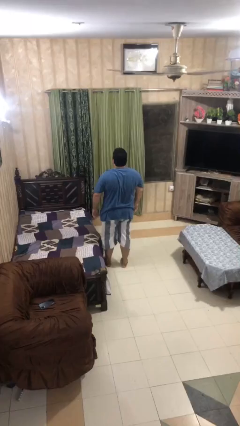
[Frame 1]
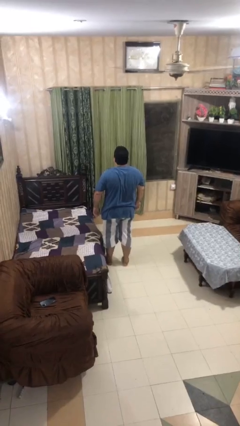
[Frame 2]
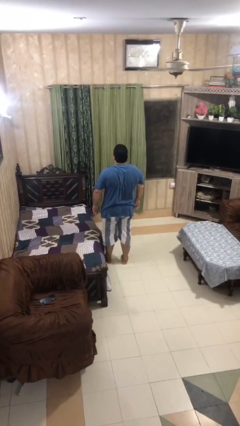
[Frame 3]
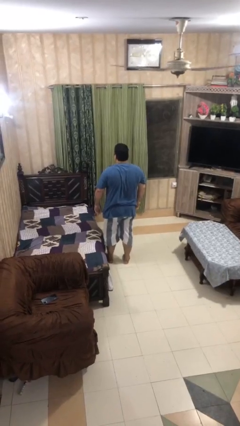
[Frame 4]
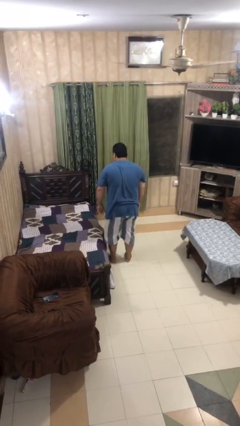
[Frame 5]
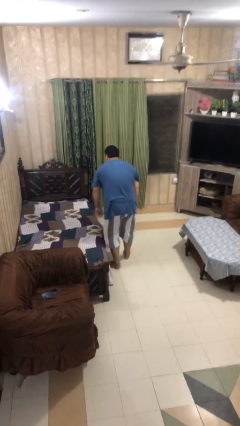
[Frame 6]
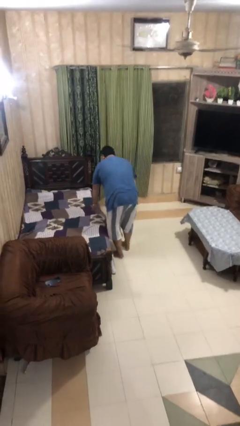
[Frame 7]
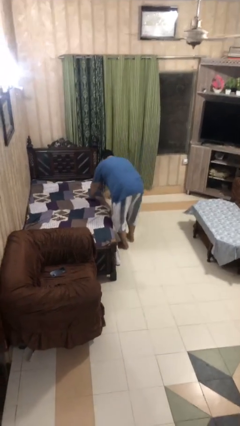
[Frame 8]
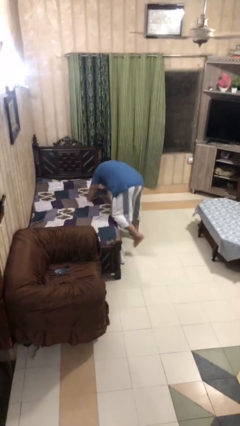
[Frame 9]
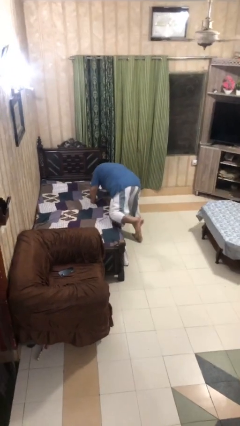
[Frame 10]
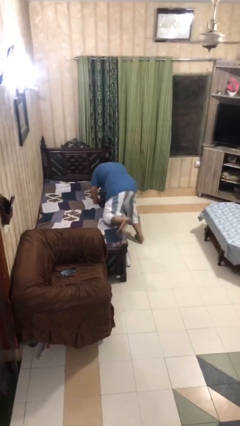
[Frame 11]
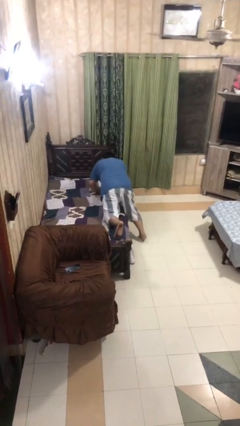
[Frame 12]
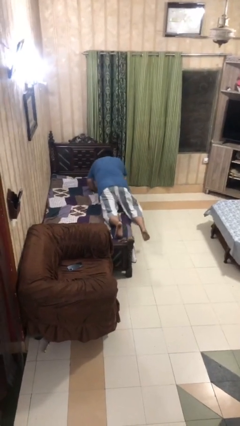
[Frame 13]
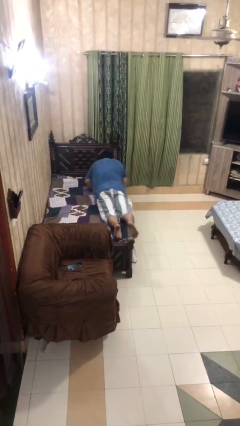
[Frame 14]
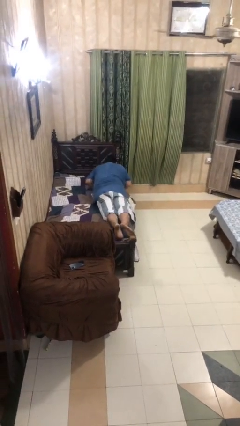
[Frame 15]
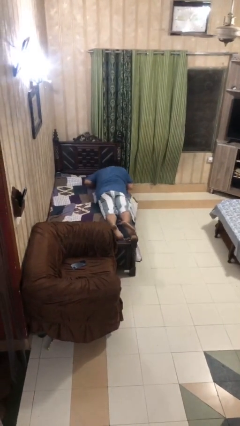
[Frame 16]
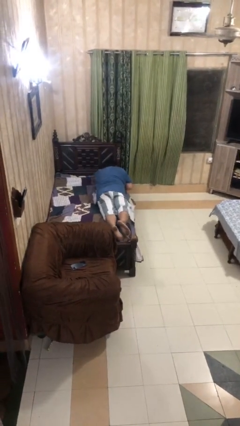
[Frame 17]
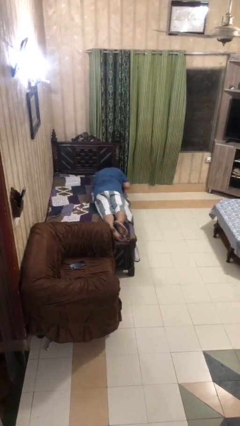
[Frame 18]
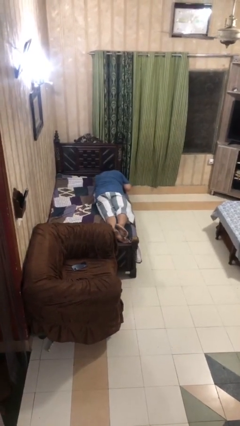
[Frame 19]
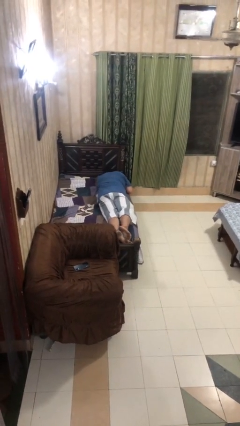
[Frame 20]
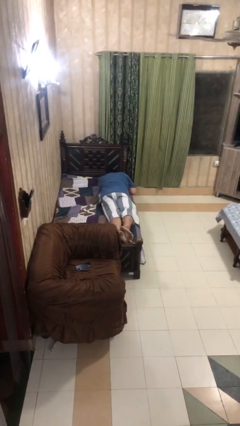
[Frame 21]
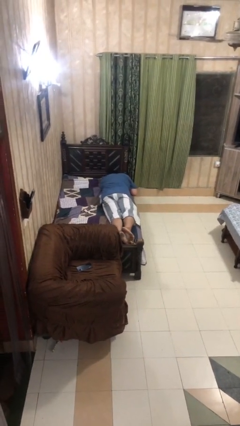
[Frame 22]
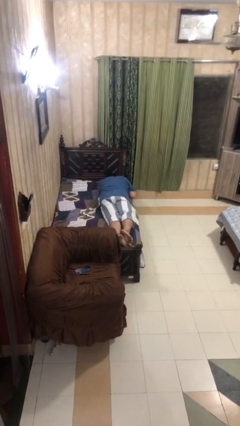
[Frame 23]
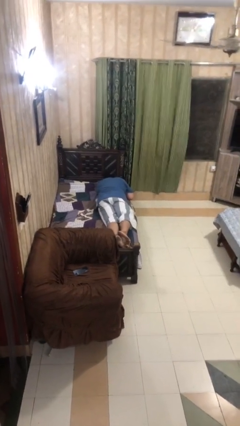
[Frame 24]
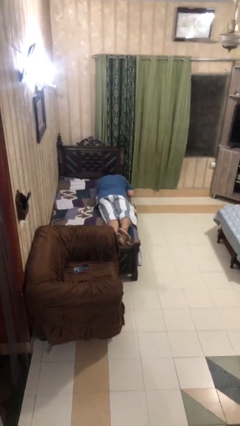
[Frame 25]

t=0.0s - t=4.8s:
person lies down on bed

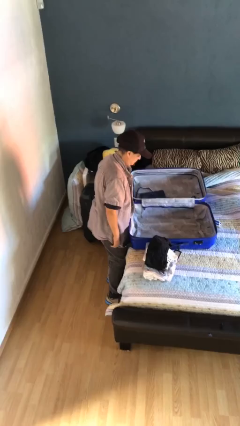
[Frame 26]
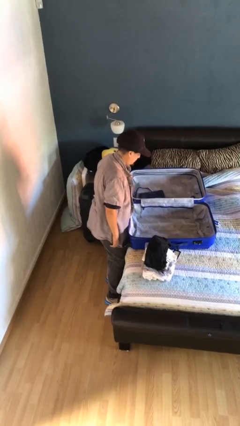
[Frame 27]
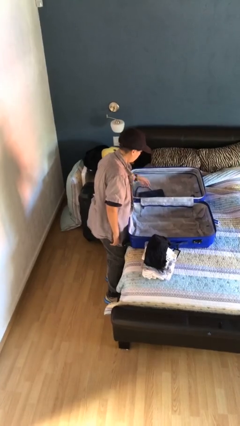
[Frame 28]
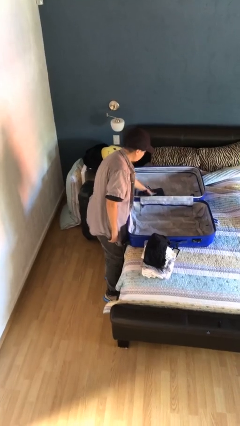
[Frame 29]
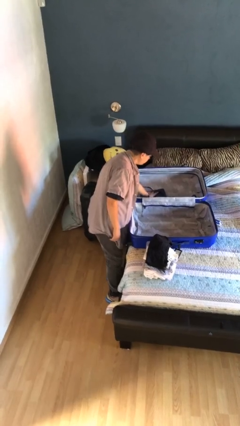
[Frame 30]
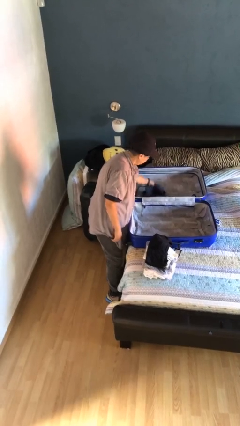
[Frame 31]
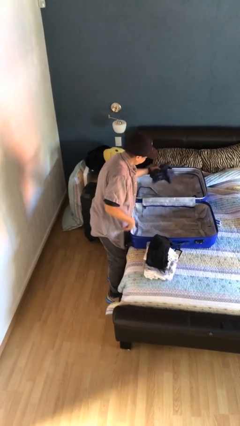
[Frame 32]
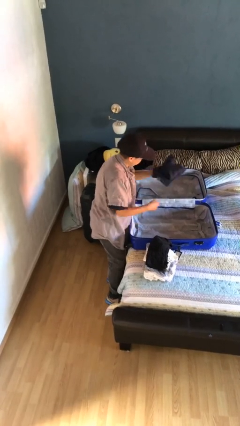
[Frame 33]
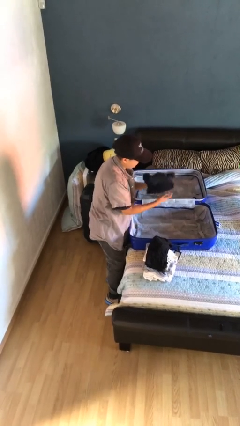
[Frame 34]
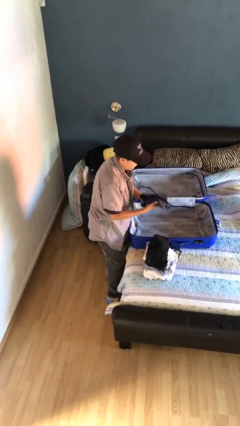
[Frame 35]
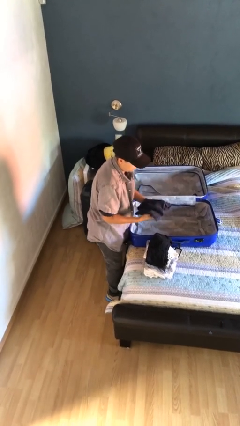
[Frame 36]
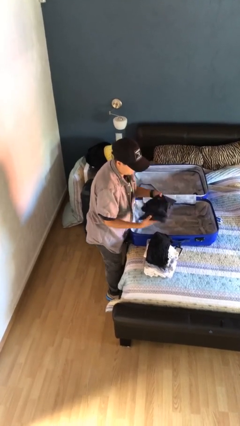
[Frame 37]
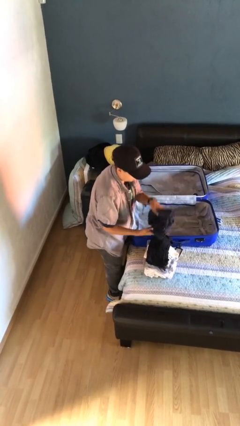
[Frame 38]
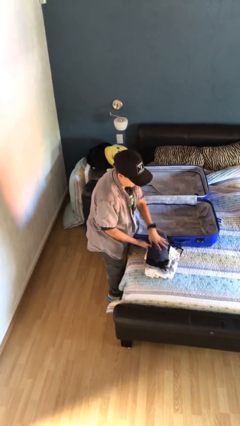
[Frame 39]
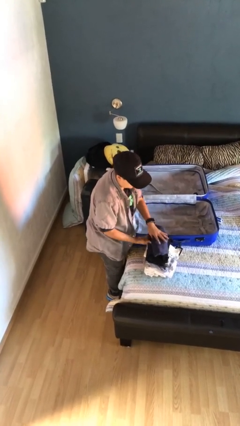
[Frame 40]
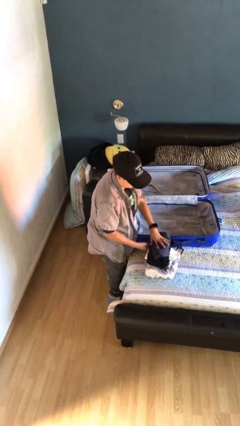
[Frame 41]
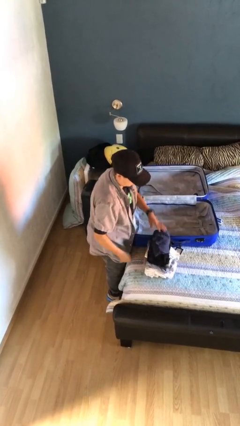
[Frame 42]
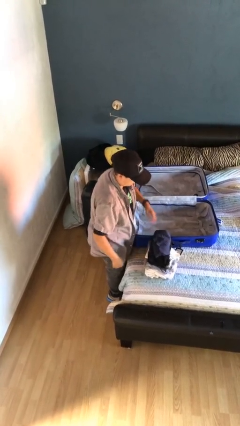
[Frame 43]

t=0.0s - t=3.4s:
person unloads clothes from suitcase

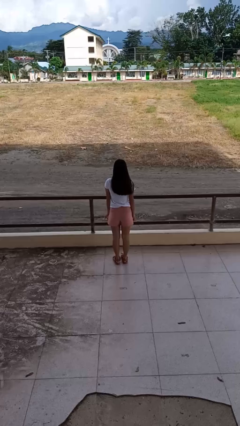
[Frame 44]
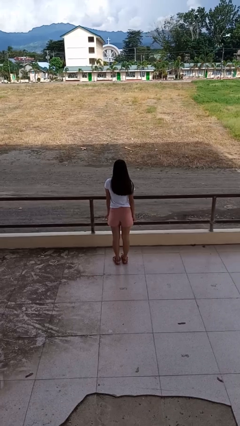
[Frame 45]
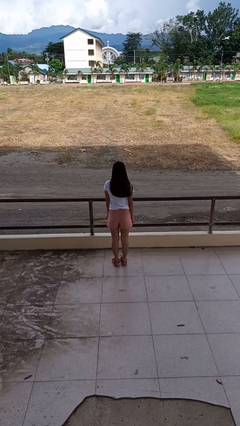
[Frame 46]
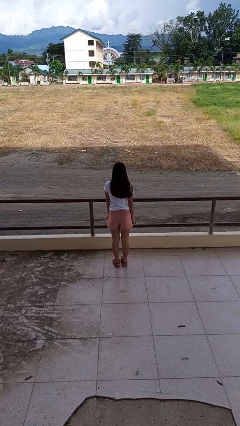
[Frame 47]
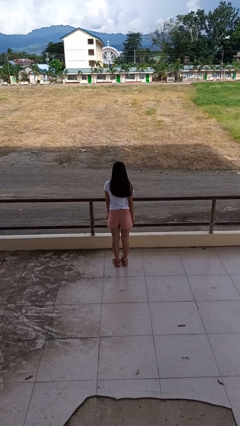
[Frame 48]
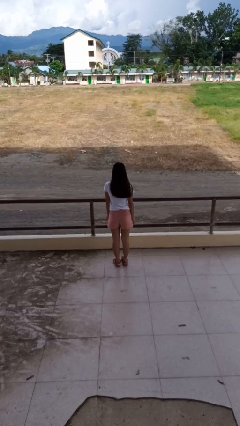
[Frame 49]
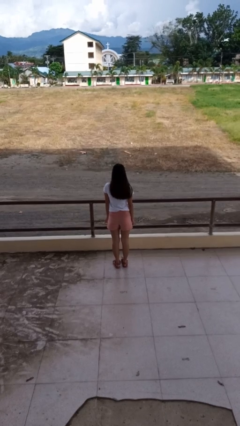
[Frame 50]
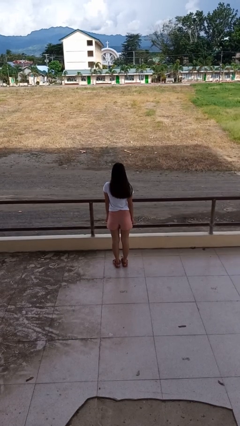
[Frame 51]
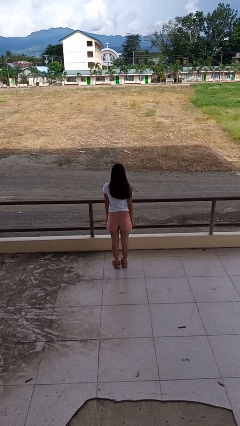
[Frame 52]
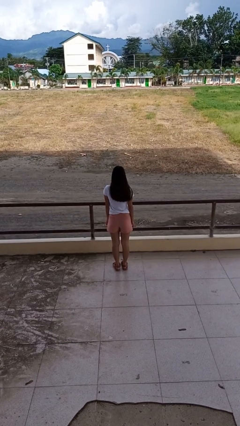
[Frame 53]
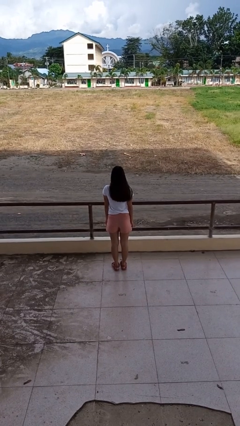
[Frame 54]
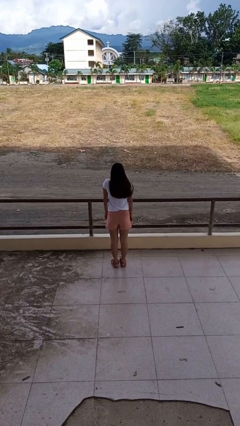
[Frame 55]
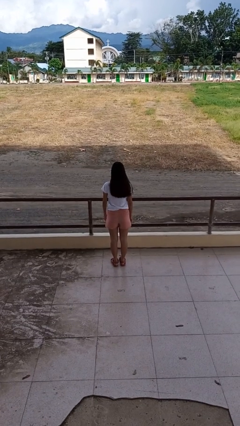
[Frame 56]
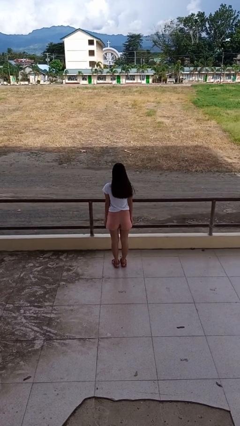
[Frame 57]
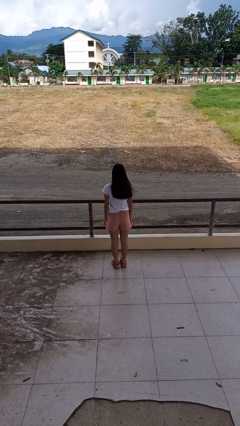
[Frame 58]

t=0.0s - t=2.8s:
person shrugs

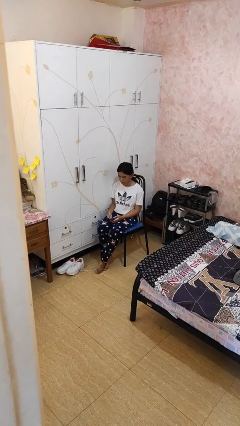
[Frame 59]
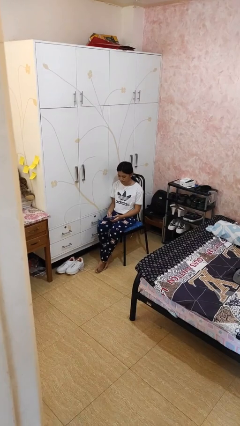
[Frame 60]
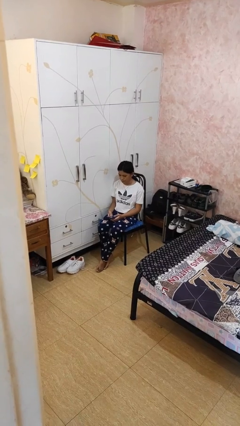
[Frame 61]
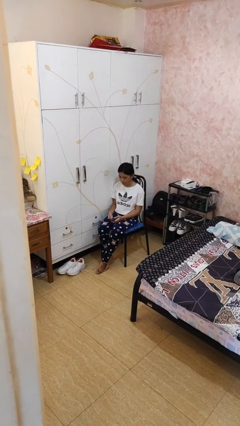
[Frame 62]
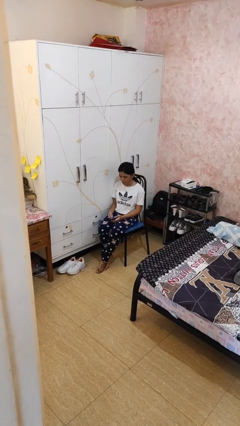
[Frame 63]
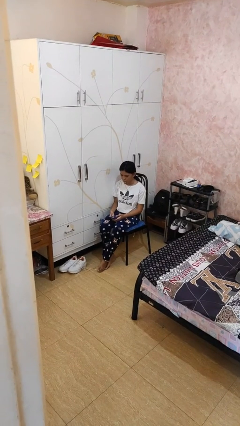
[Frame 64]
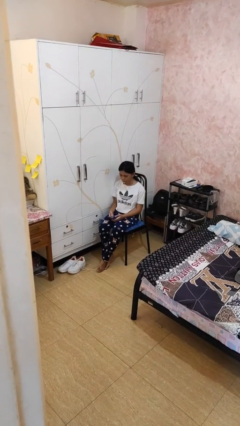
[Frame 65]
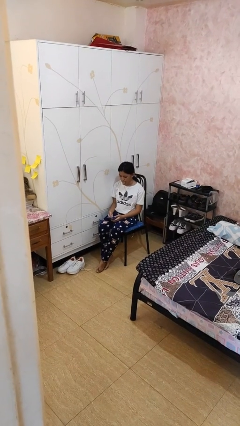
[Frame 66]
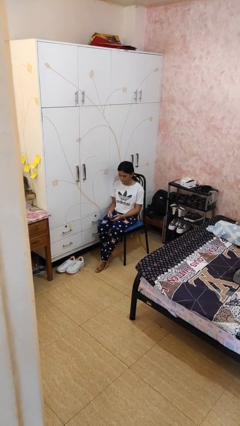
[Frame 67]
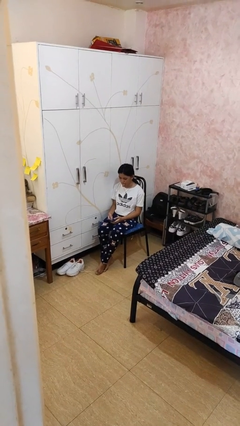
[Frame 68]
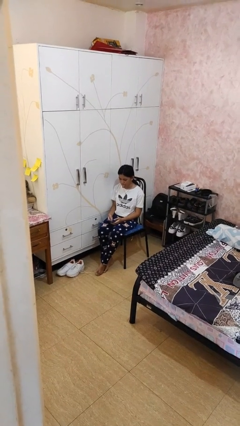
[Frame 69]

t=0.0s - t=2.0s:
person sticks out tongue

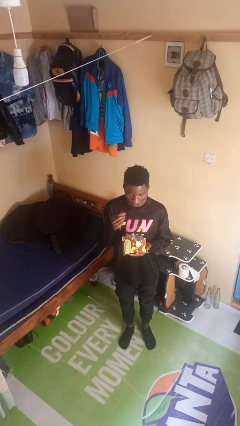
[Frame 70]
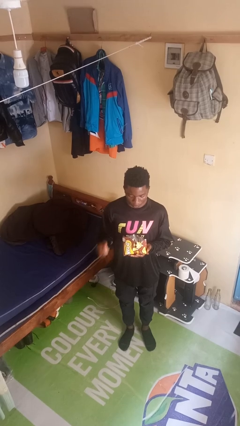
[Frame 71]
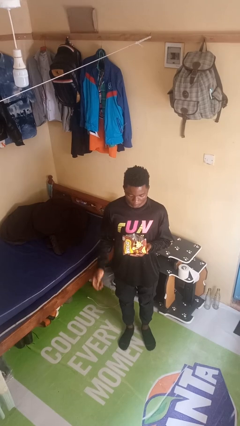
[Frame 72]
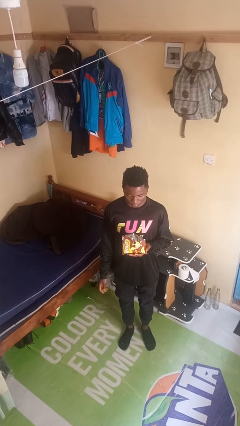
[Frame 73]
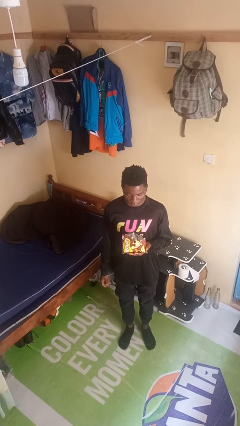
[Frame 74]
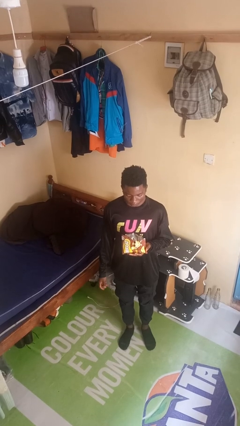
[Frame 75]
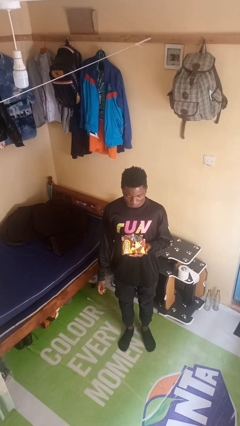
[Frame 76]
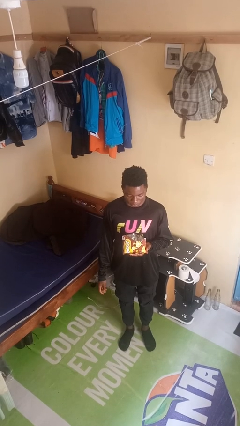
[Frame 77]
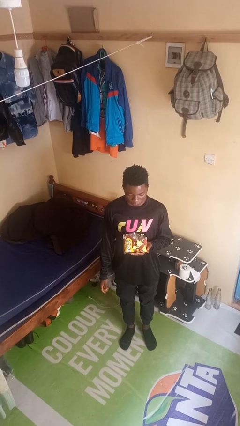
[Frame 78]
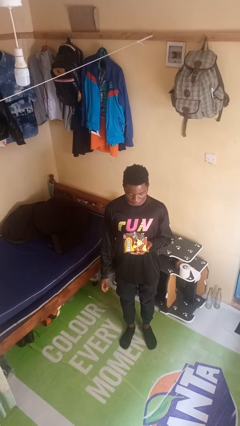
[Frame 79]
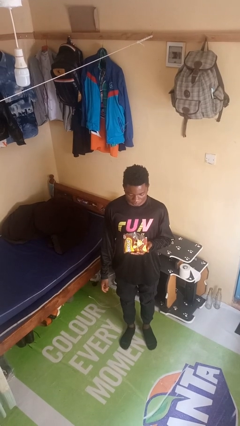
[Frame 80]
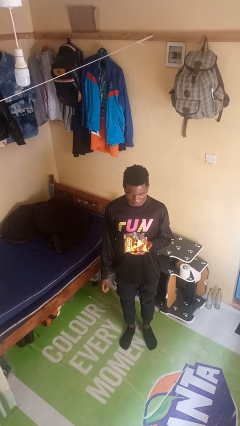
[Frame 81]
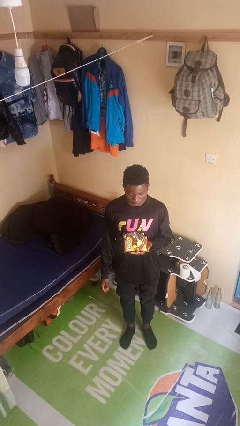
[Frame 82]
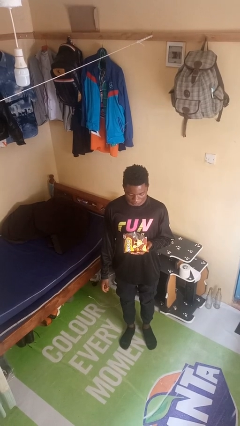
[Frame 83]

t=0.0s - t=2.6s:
person eats snack from bag

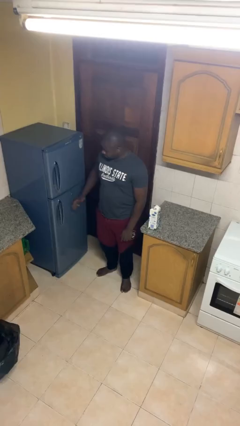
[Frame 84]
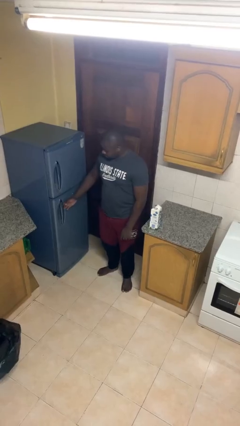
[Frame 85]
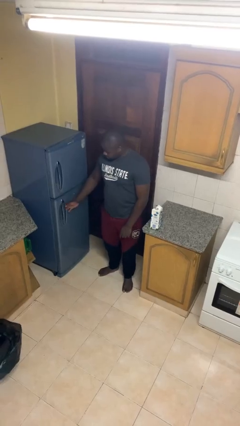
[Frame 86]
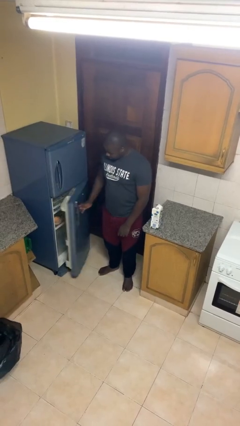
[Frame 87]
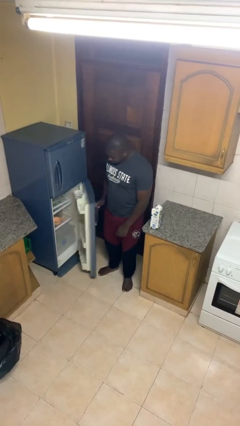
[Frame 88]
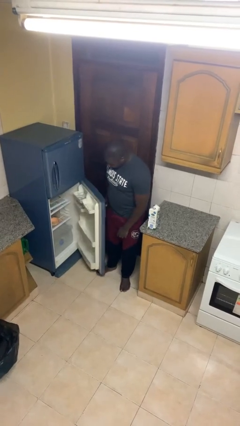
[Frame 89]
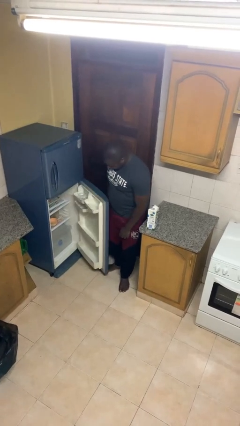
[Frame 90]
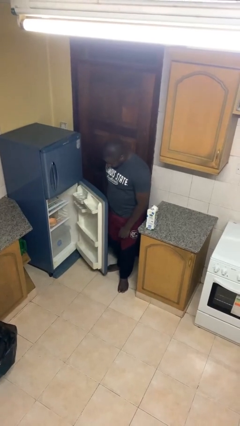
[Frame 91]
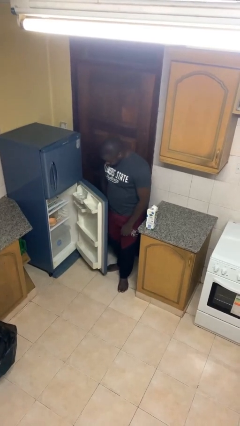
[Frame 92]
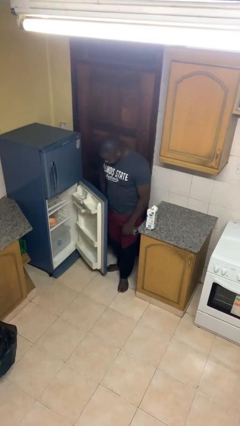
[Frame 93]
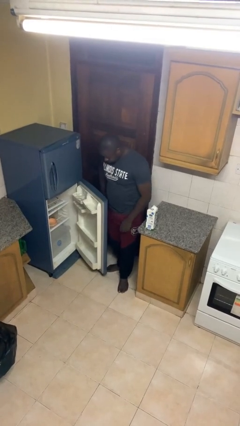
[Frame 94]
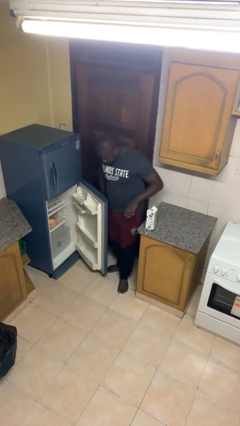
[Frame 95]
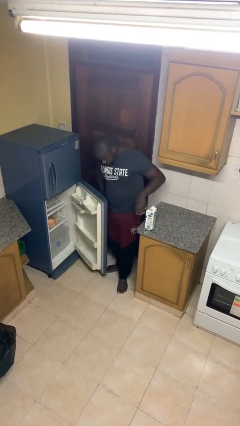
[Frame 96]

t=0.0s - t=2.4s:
person opens refrigerator
